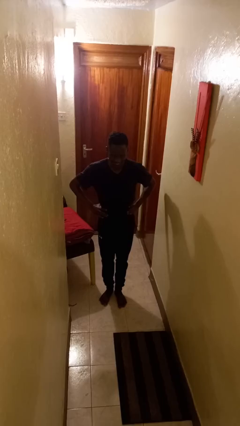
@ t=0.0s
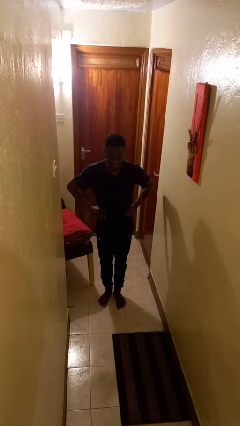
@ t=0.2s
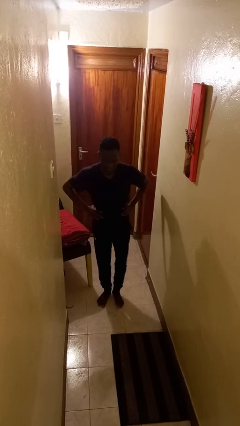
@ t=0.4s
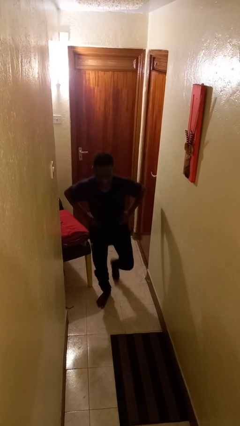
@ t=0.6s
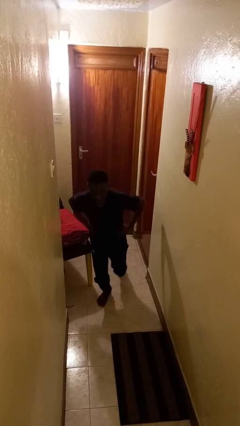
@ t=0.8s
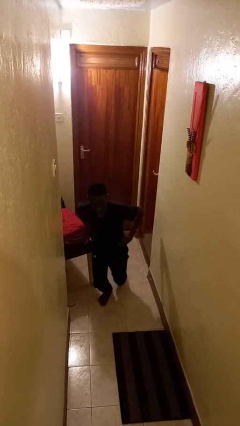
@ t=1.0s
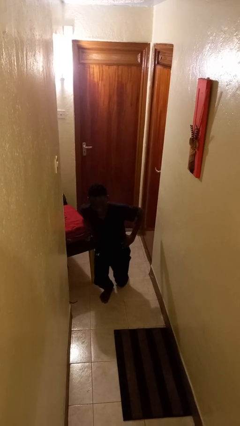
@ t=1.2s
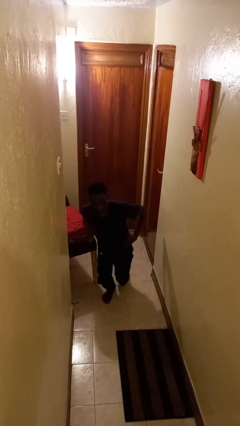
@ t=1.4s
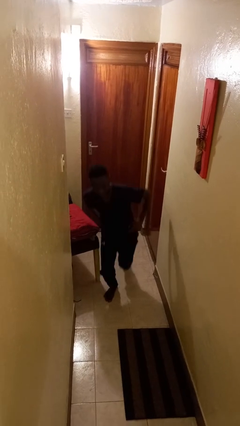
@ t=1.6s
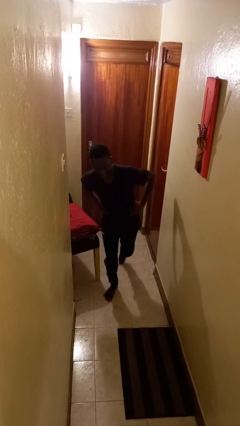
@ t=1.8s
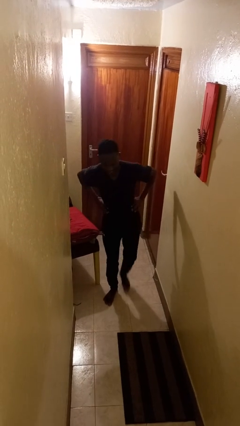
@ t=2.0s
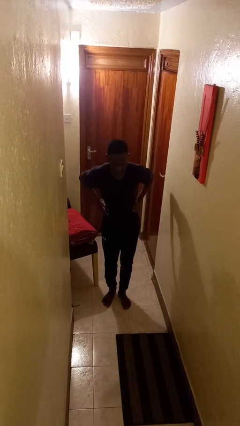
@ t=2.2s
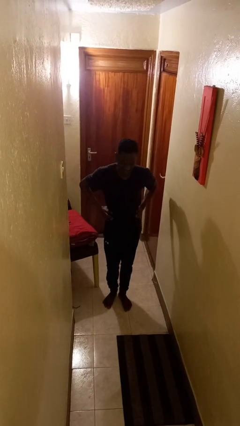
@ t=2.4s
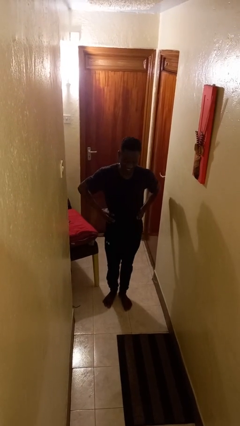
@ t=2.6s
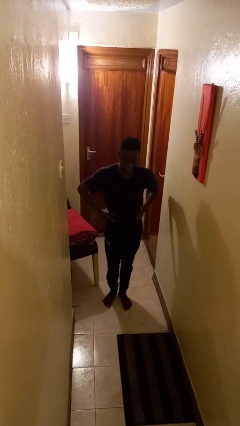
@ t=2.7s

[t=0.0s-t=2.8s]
person exercises with lunges

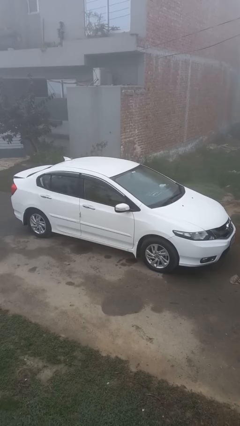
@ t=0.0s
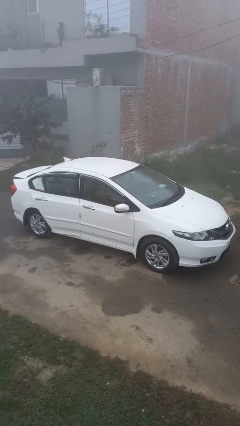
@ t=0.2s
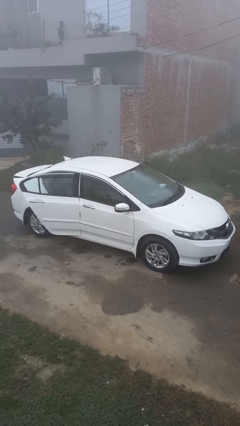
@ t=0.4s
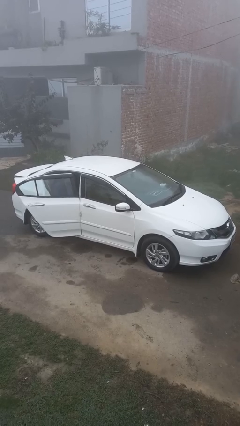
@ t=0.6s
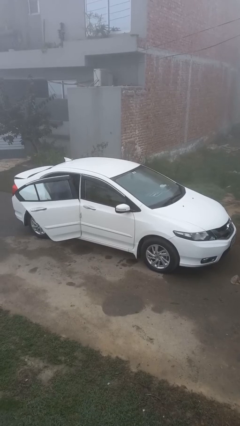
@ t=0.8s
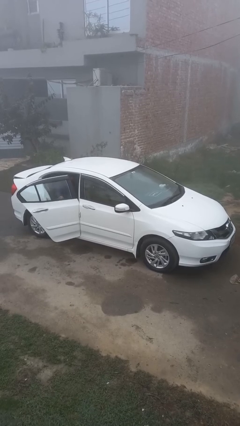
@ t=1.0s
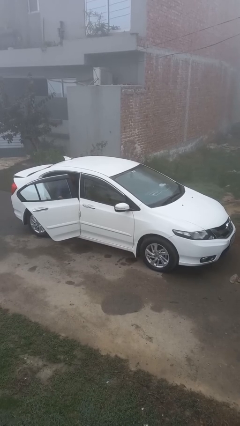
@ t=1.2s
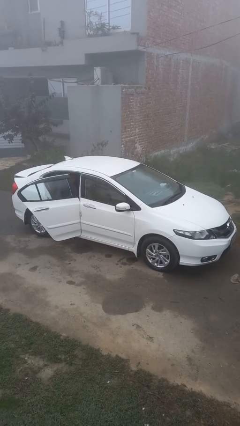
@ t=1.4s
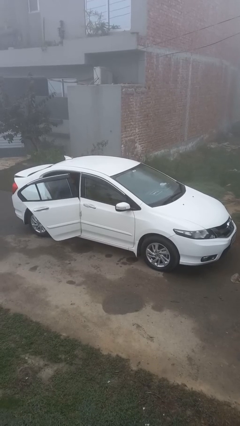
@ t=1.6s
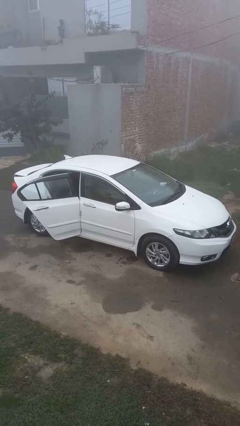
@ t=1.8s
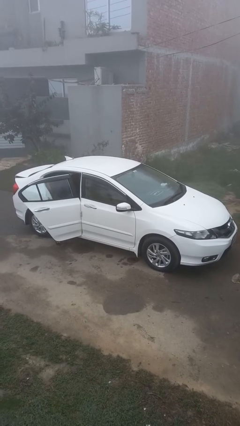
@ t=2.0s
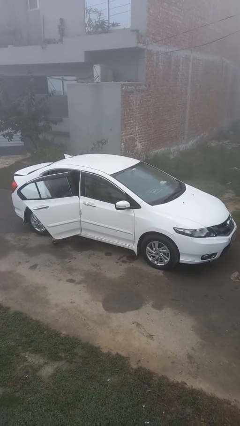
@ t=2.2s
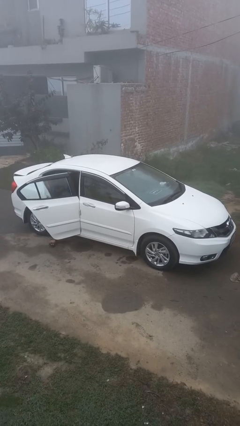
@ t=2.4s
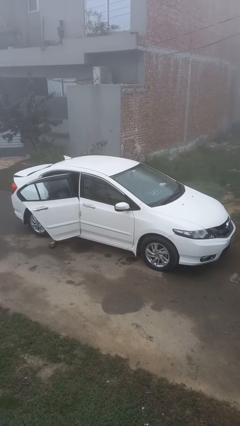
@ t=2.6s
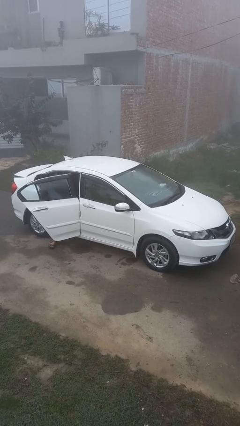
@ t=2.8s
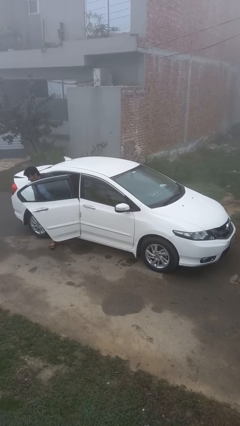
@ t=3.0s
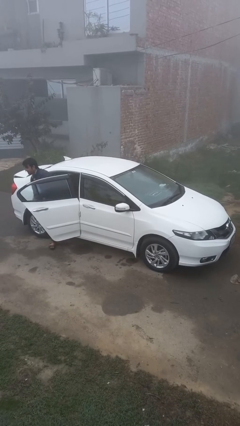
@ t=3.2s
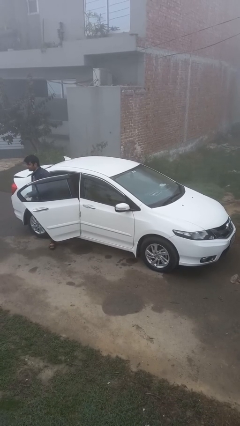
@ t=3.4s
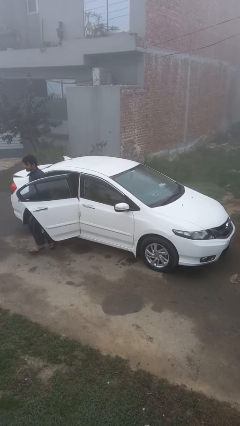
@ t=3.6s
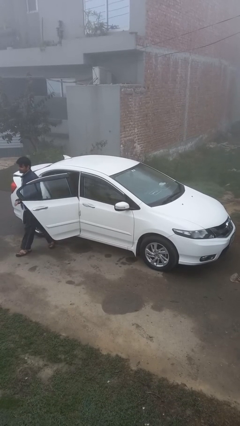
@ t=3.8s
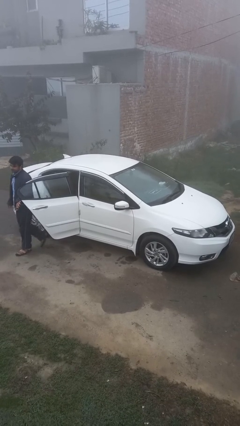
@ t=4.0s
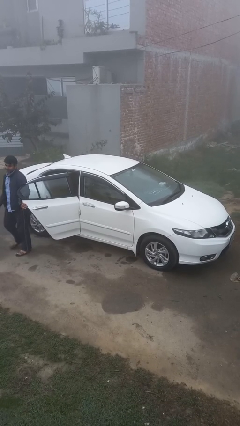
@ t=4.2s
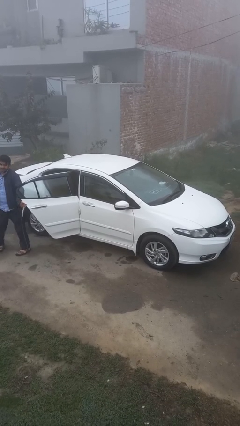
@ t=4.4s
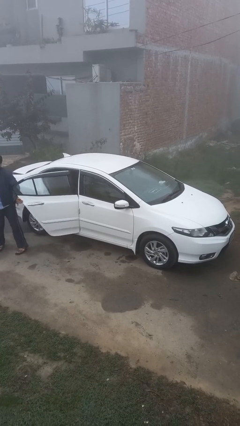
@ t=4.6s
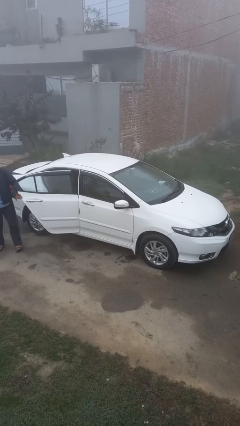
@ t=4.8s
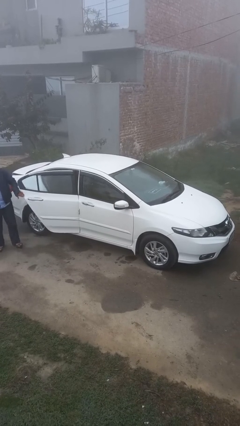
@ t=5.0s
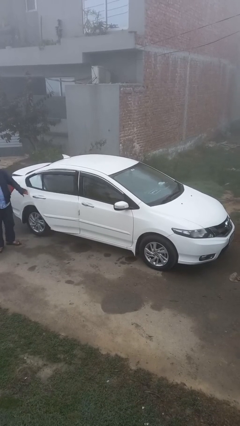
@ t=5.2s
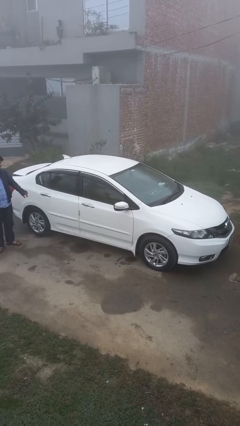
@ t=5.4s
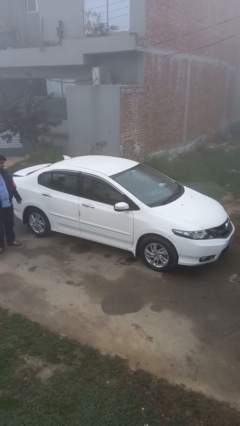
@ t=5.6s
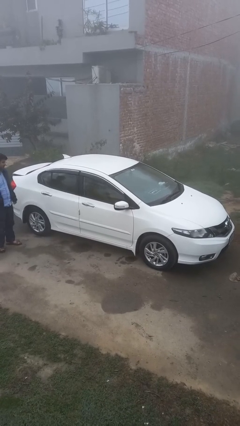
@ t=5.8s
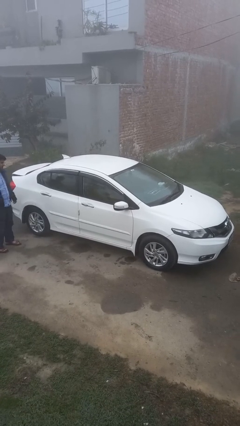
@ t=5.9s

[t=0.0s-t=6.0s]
car drops off person

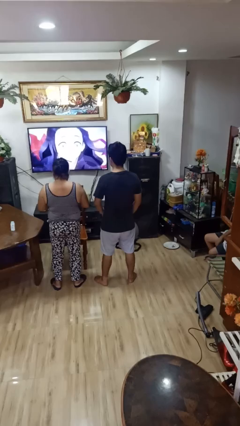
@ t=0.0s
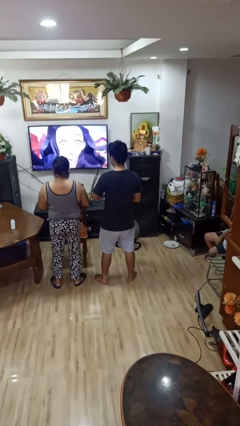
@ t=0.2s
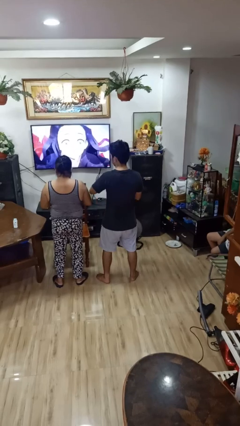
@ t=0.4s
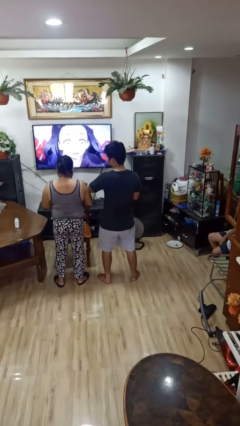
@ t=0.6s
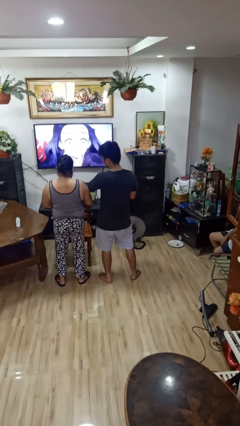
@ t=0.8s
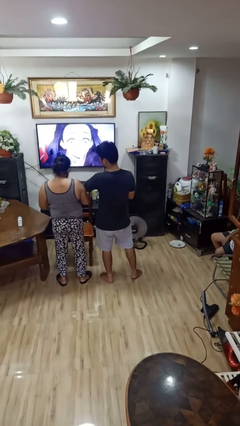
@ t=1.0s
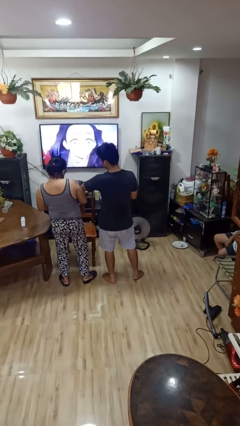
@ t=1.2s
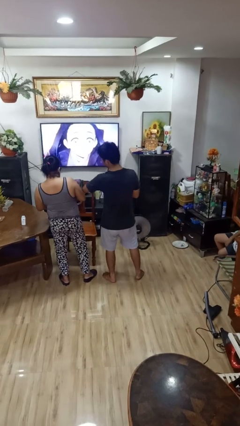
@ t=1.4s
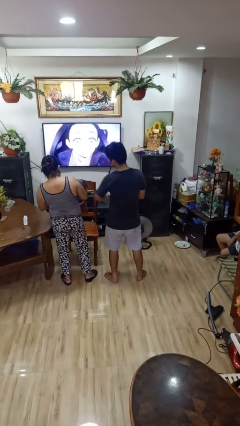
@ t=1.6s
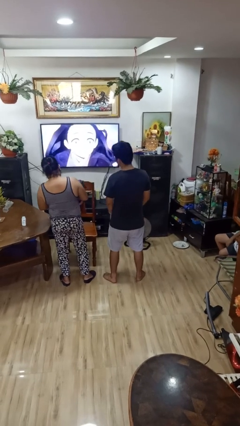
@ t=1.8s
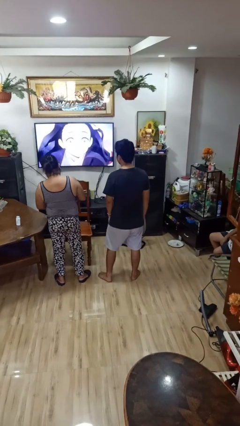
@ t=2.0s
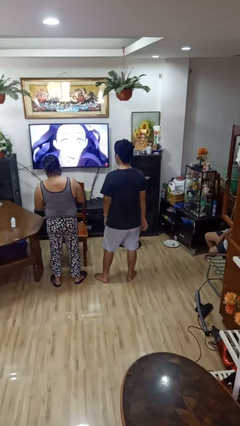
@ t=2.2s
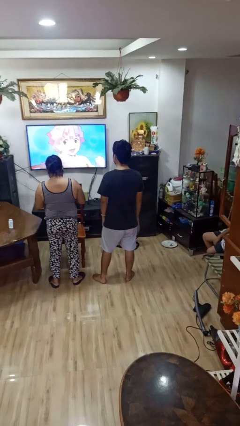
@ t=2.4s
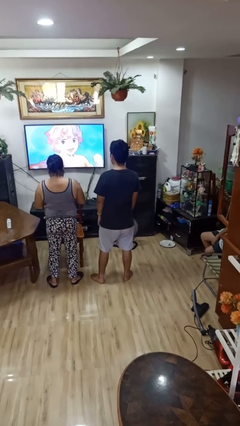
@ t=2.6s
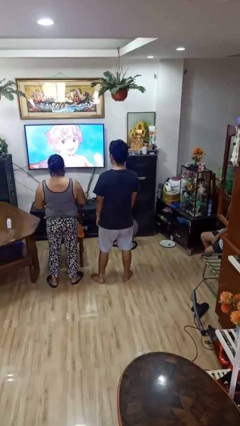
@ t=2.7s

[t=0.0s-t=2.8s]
person shoves person

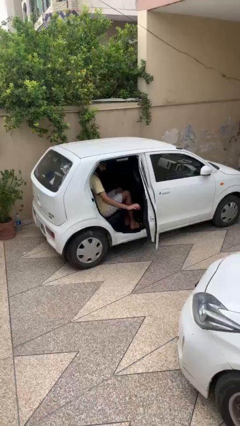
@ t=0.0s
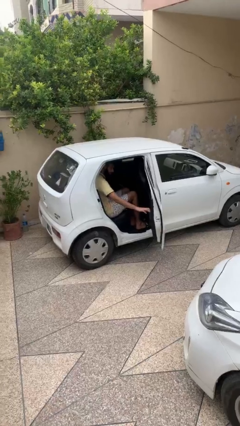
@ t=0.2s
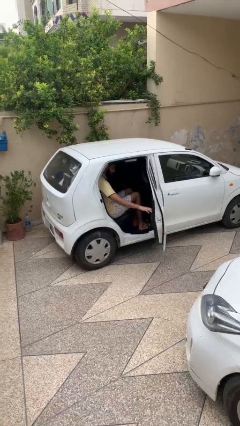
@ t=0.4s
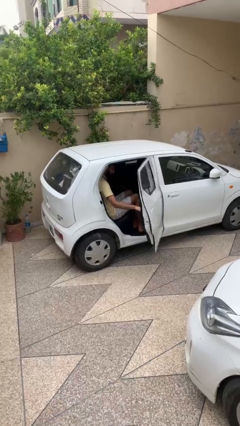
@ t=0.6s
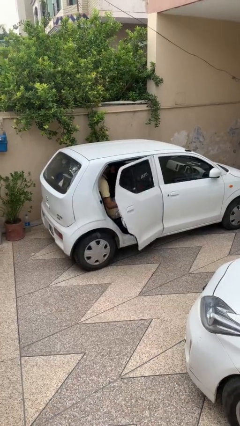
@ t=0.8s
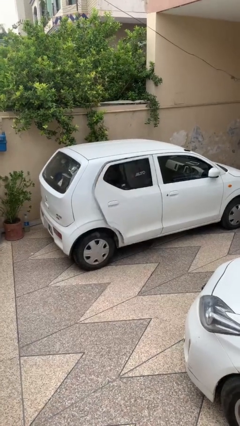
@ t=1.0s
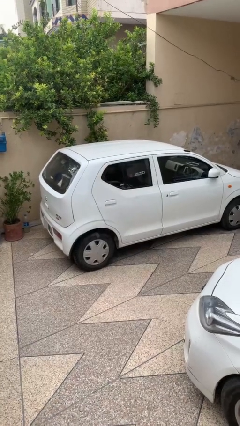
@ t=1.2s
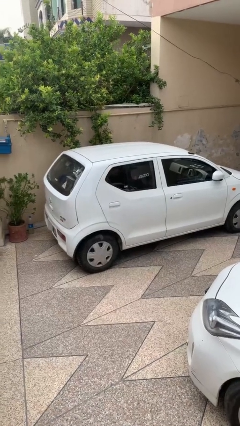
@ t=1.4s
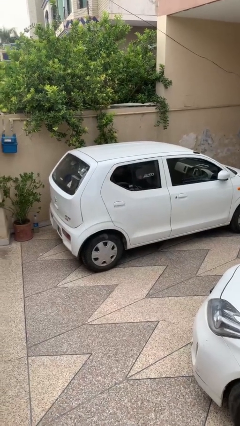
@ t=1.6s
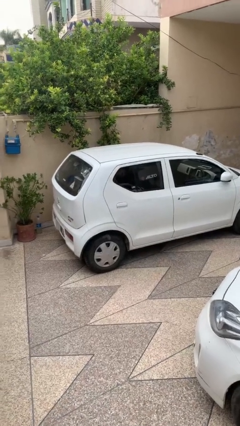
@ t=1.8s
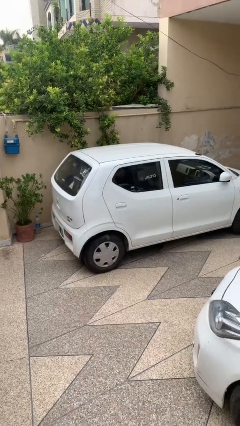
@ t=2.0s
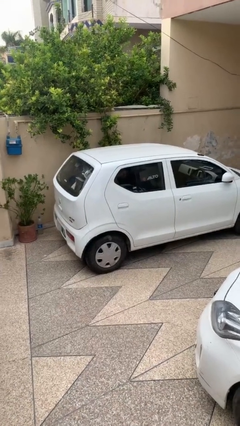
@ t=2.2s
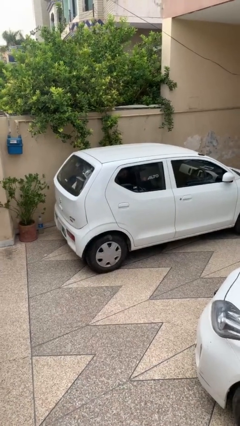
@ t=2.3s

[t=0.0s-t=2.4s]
person closes car door

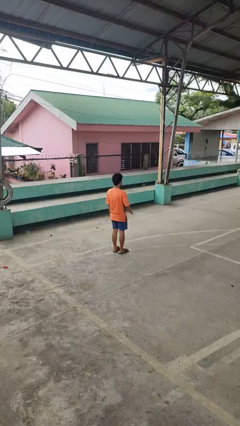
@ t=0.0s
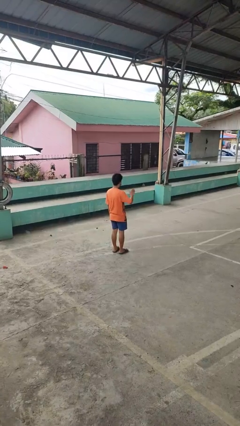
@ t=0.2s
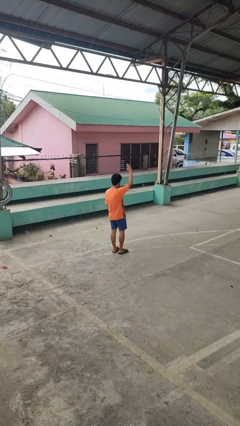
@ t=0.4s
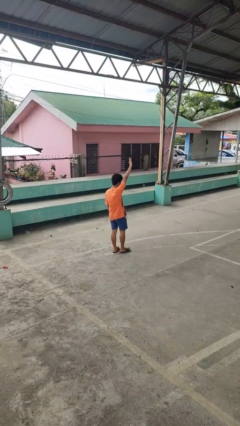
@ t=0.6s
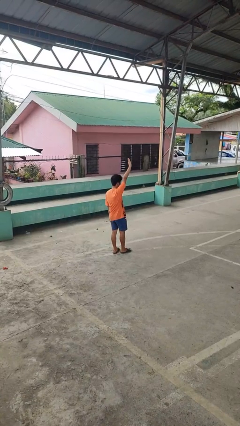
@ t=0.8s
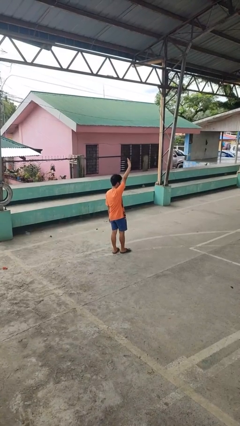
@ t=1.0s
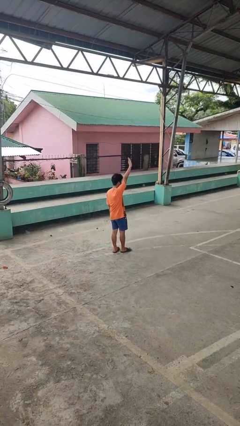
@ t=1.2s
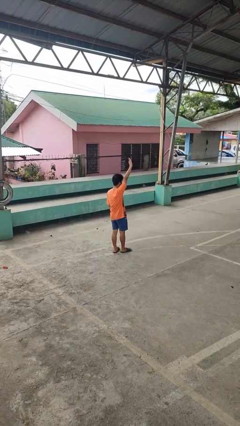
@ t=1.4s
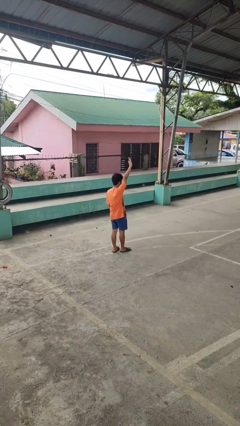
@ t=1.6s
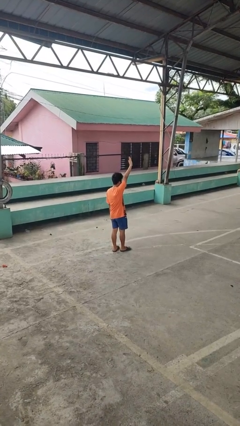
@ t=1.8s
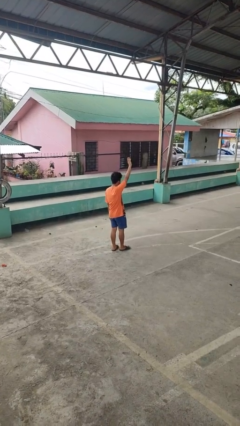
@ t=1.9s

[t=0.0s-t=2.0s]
person gestures raise hand

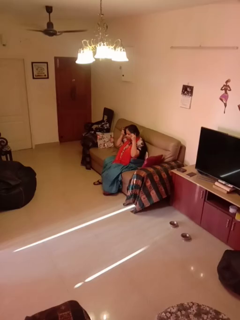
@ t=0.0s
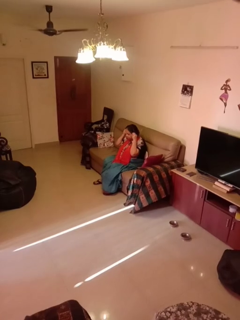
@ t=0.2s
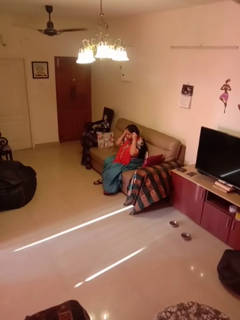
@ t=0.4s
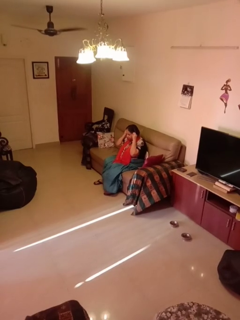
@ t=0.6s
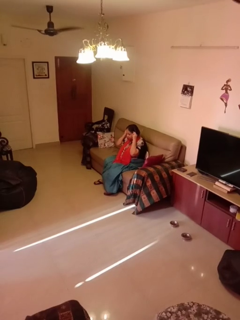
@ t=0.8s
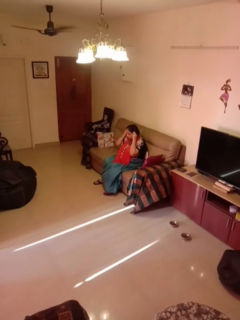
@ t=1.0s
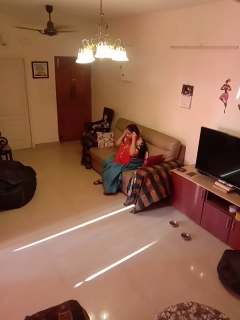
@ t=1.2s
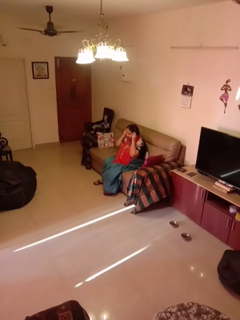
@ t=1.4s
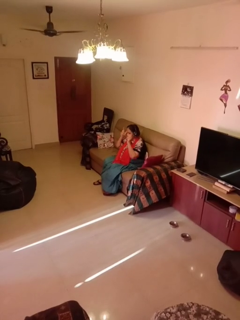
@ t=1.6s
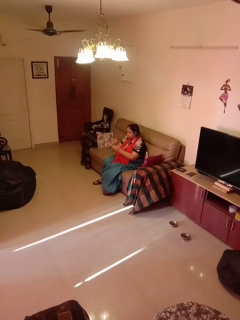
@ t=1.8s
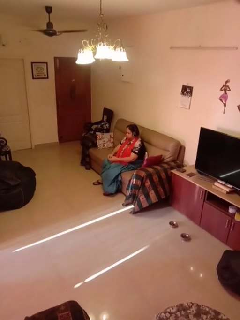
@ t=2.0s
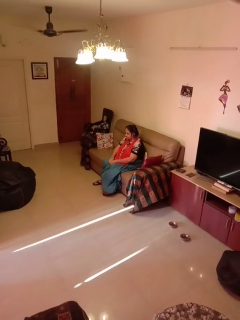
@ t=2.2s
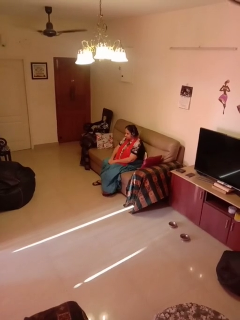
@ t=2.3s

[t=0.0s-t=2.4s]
person puts on headphones
